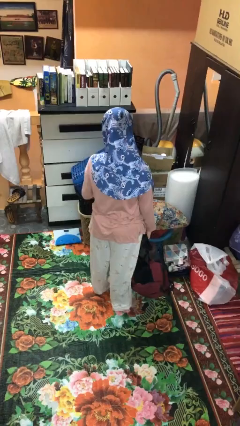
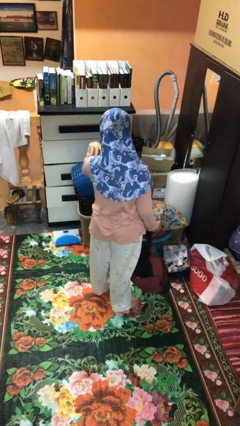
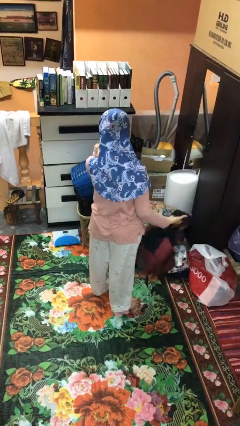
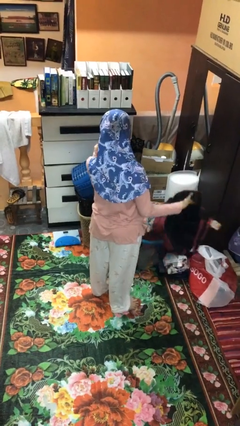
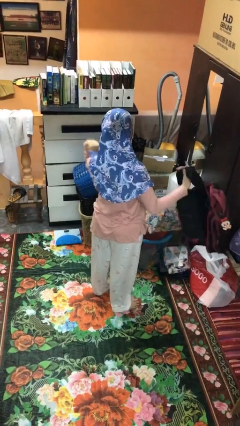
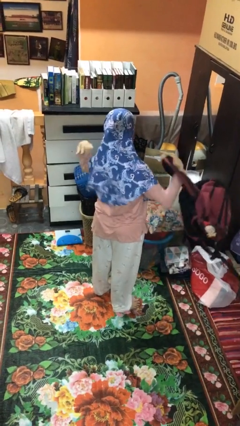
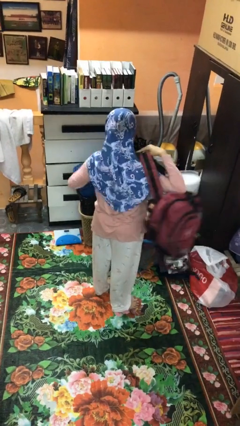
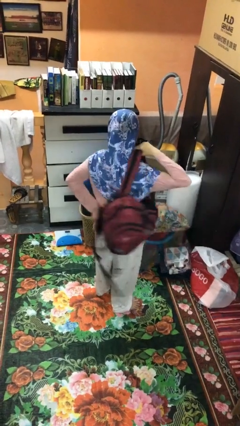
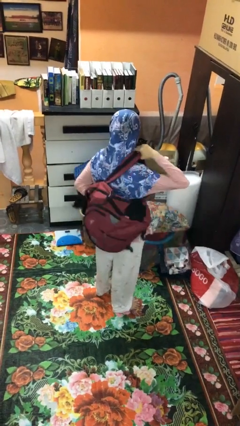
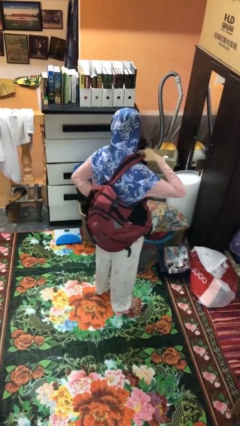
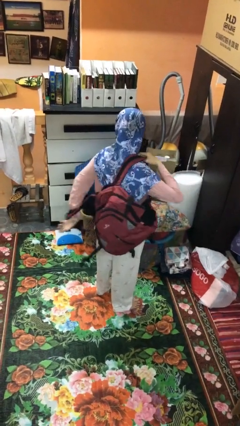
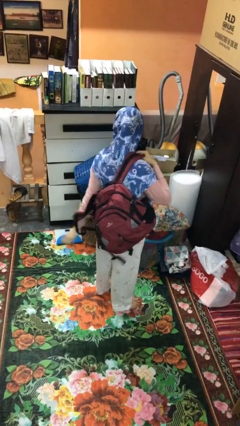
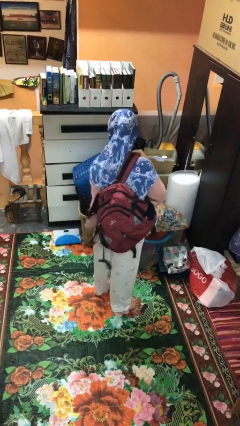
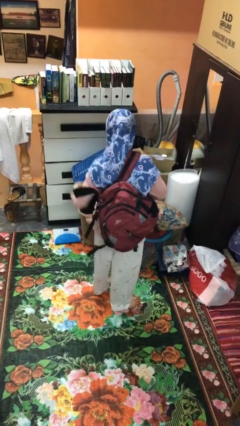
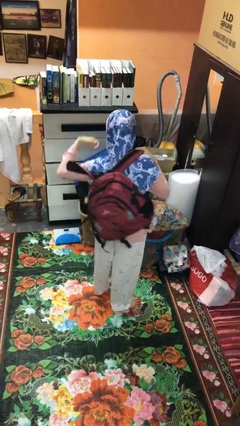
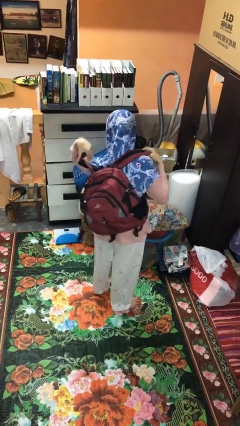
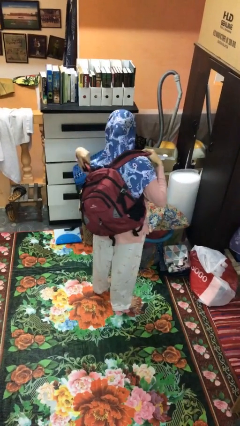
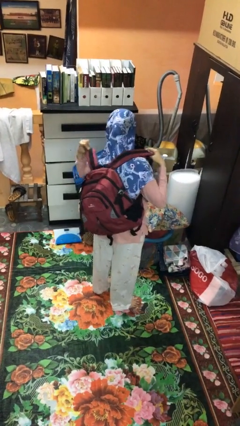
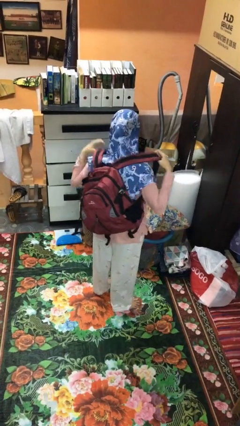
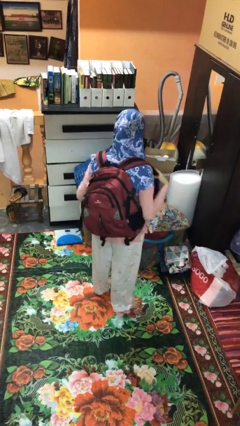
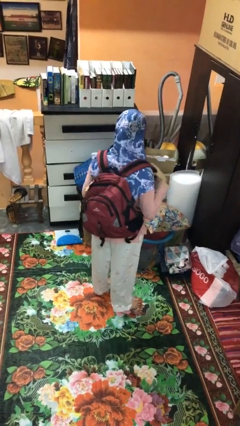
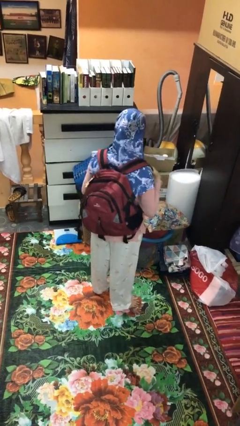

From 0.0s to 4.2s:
person puts on backpack

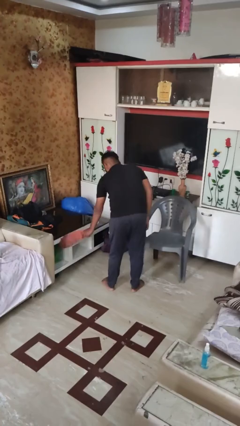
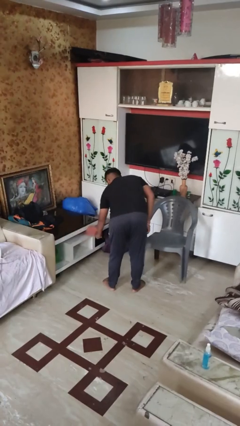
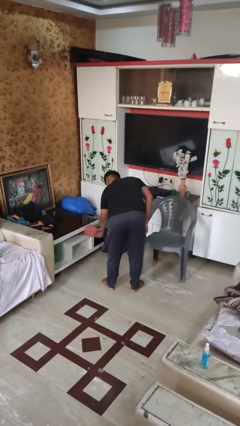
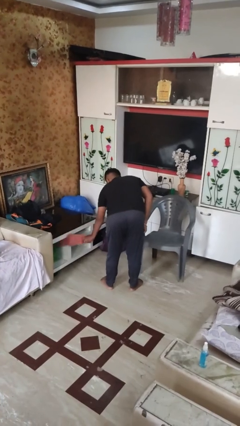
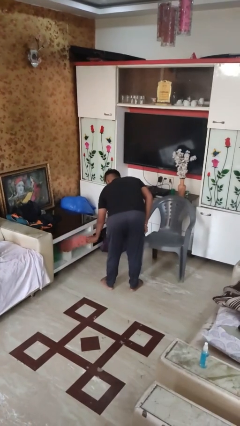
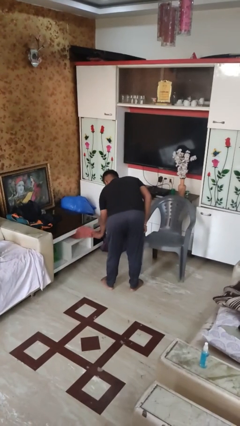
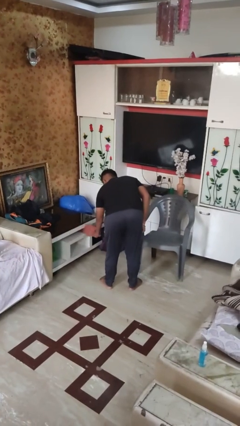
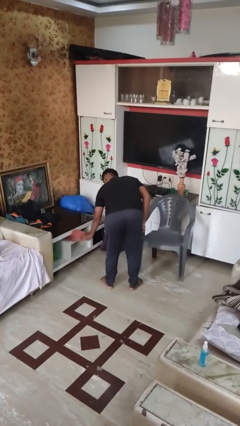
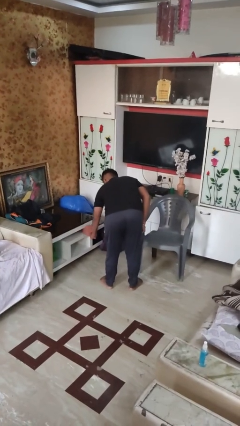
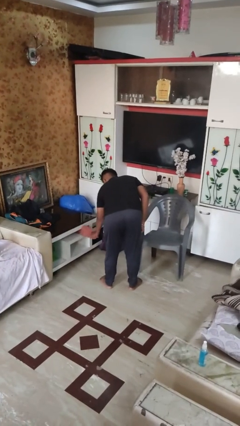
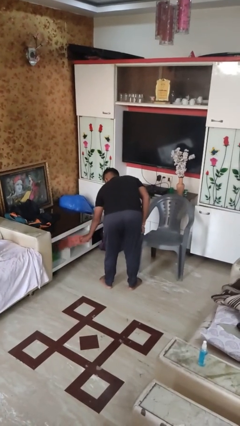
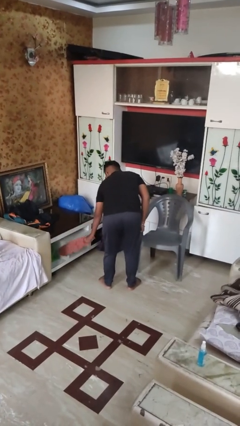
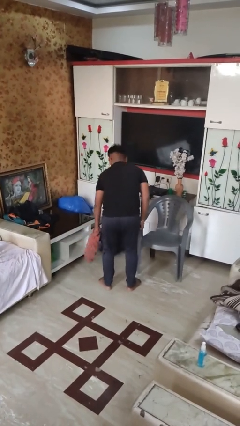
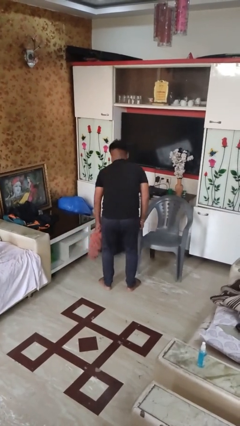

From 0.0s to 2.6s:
person dusts furniture

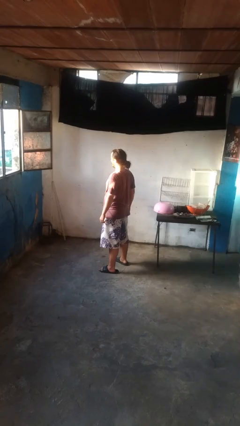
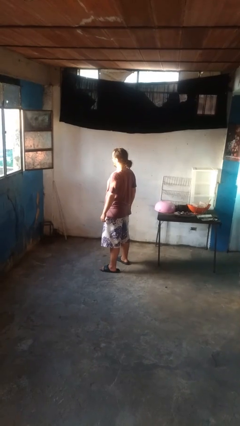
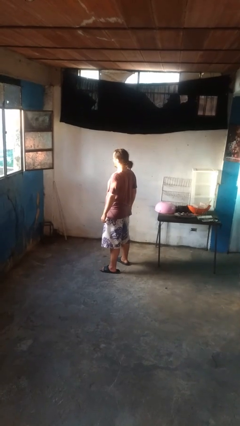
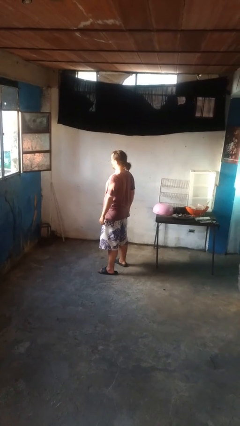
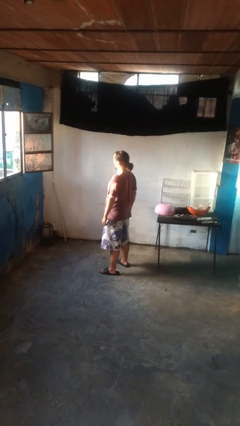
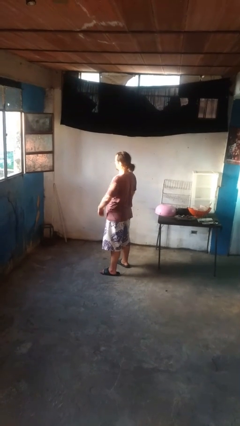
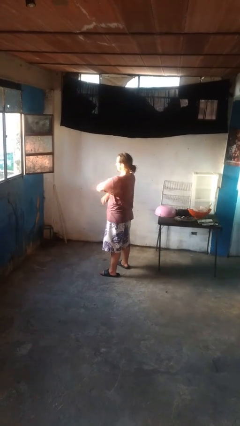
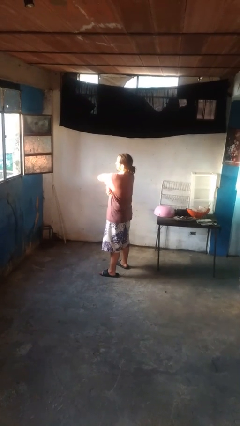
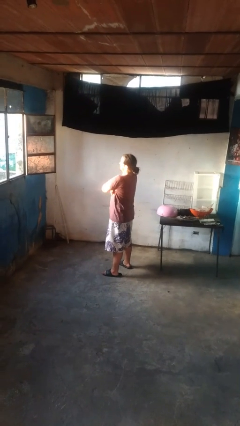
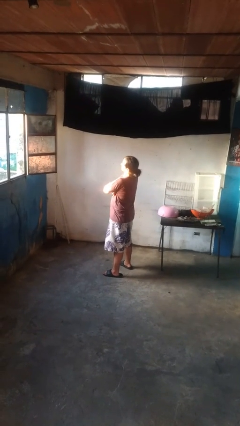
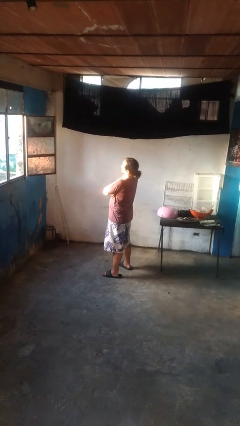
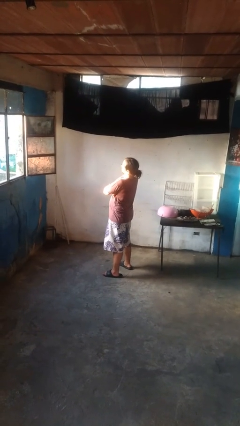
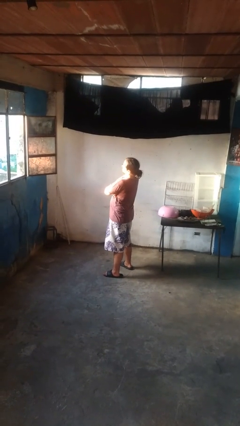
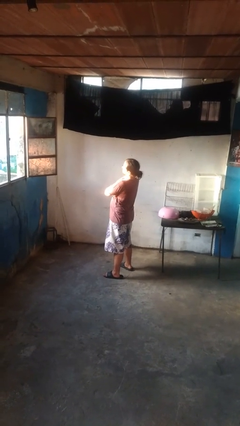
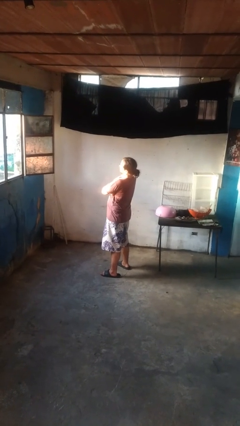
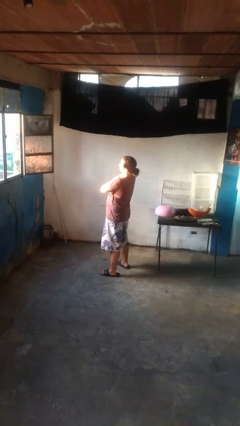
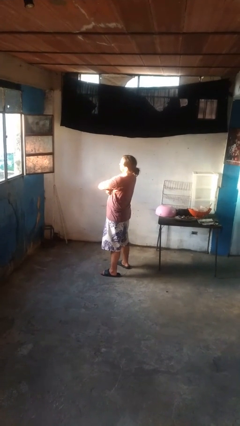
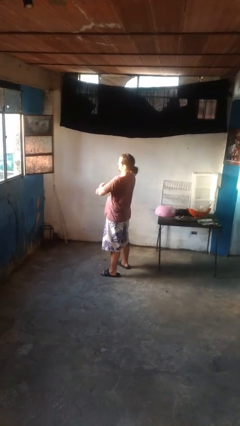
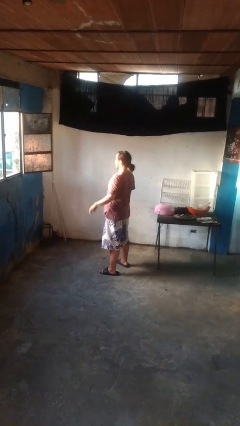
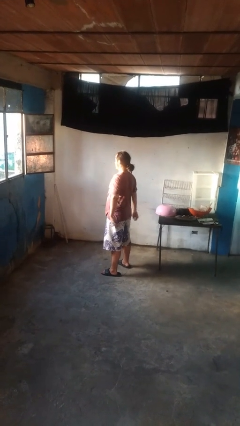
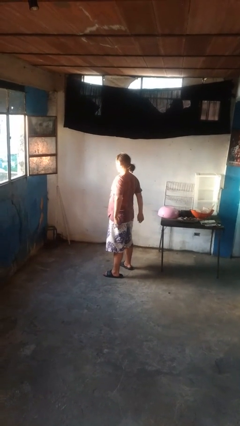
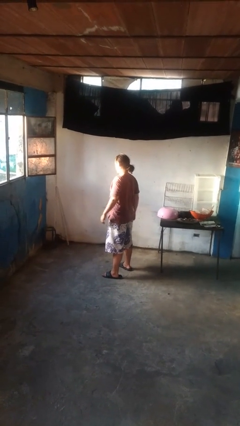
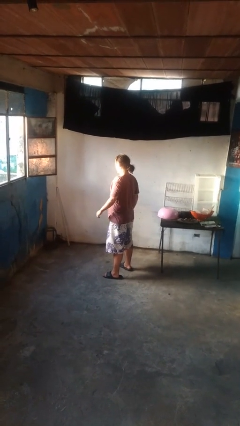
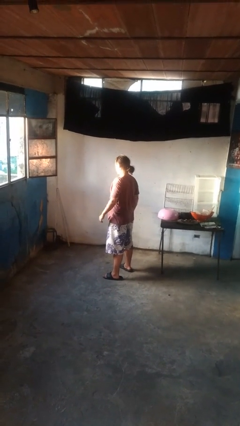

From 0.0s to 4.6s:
person gestures arms x

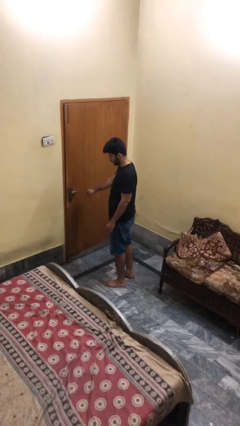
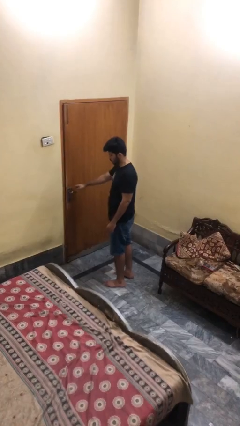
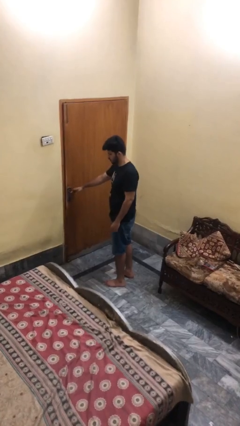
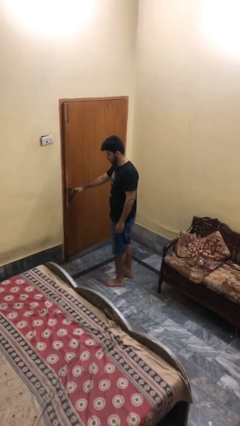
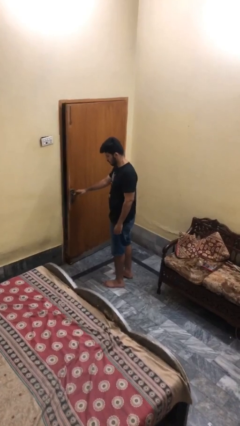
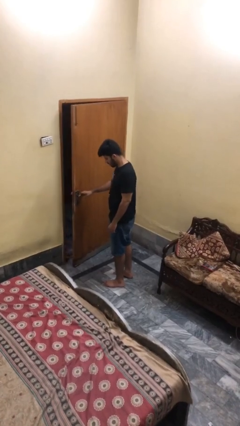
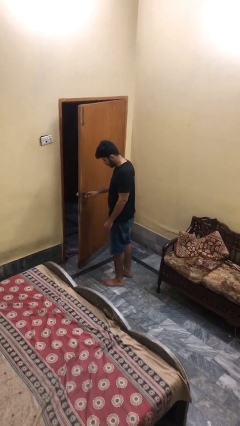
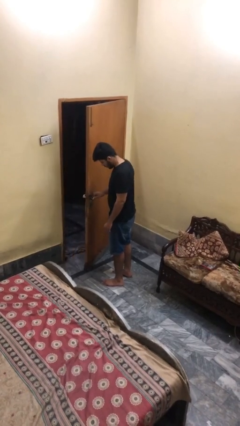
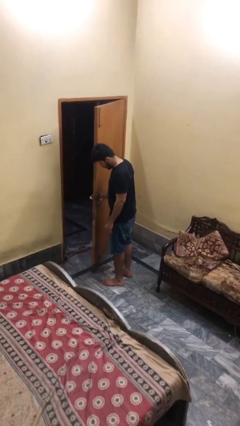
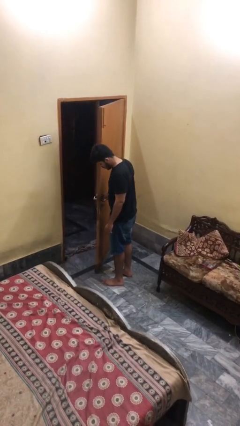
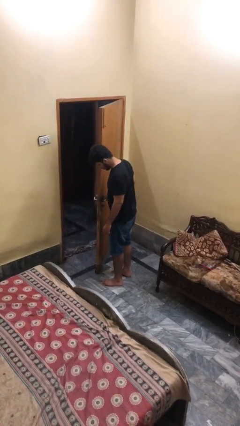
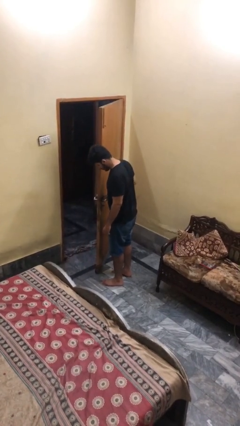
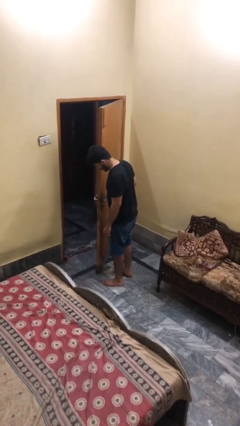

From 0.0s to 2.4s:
person opens facility door

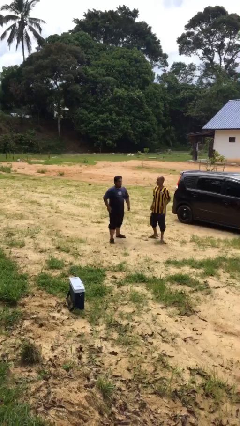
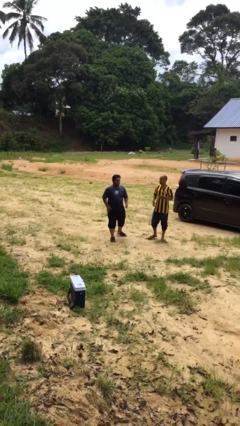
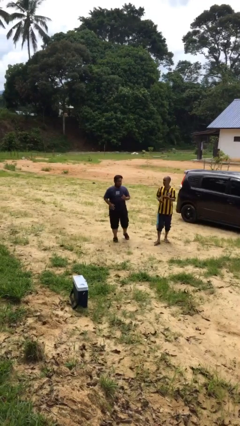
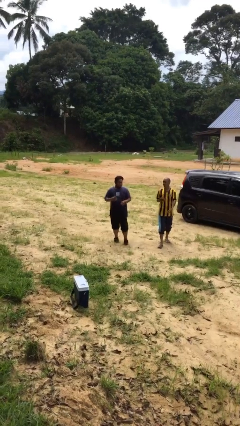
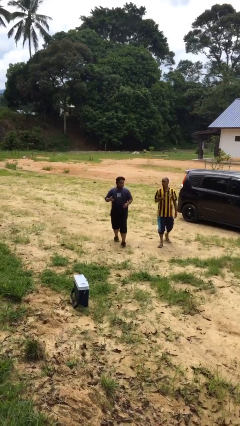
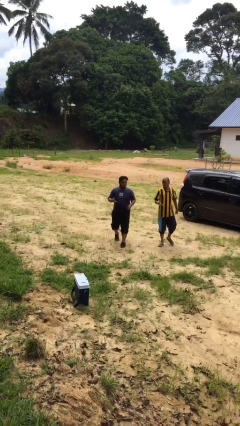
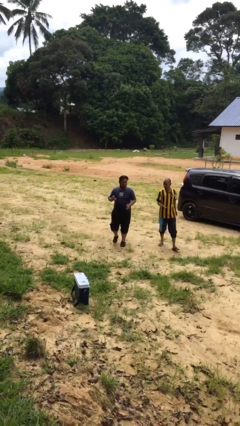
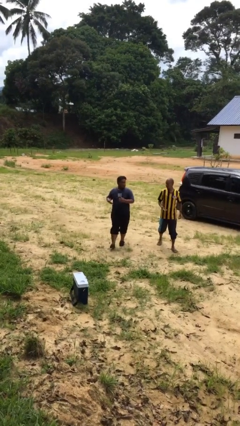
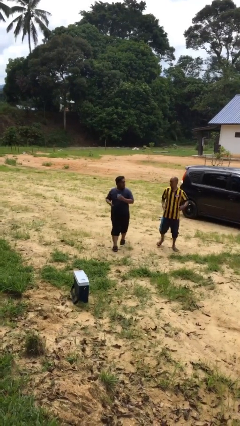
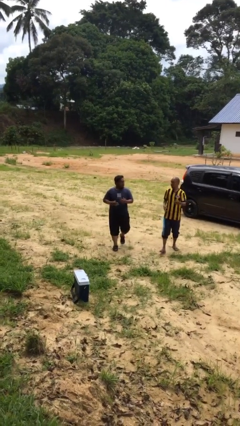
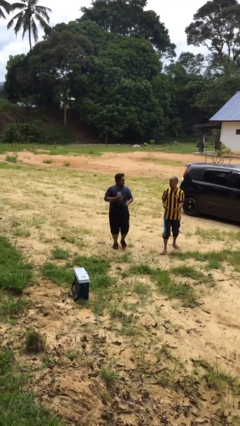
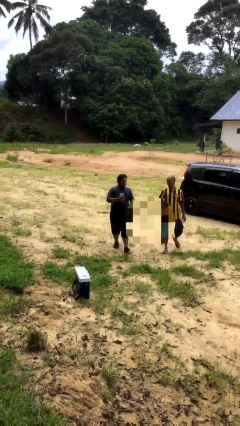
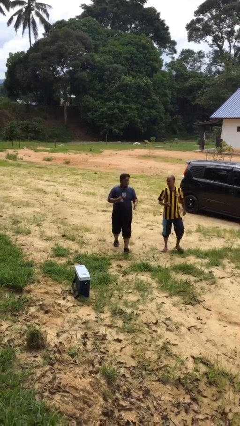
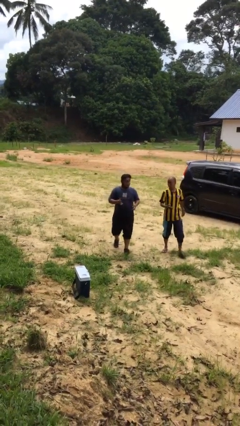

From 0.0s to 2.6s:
person talks to person

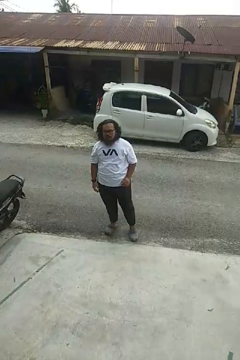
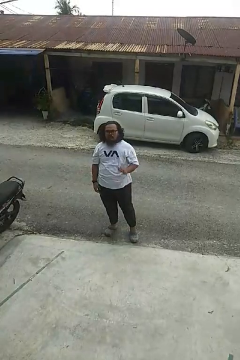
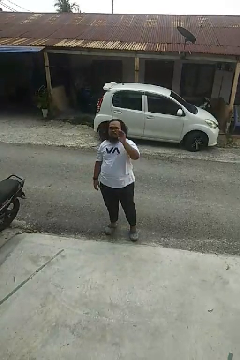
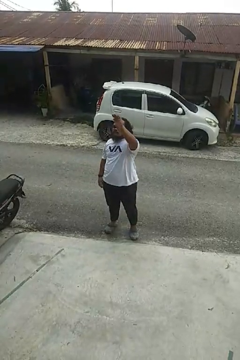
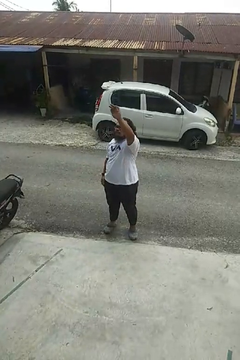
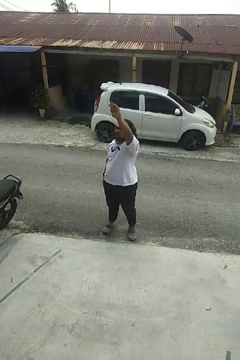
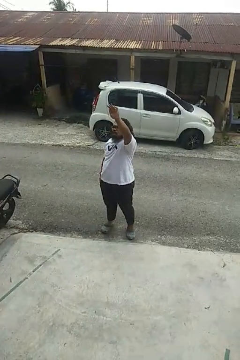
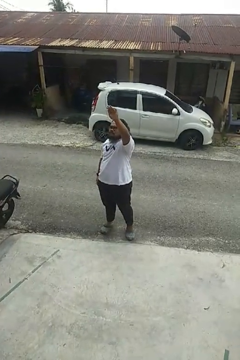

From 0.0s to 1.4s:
person gestures raise hand
